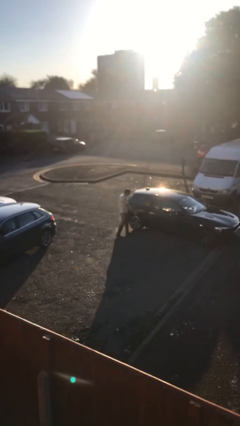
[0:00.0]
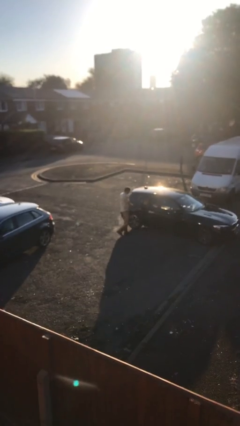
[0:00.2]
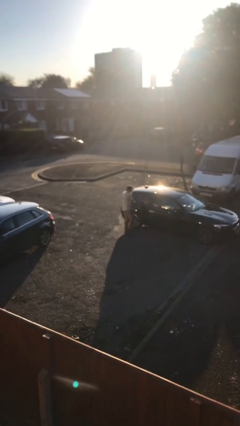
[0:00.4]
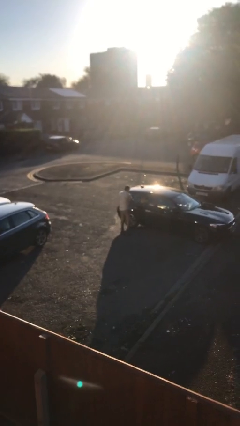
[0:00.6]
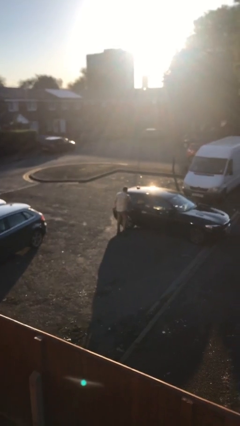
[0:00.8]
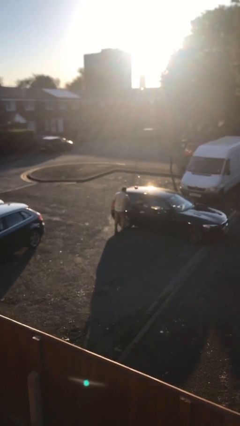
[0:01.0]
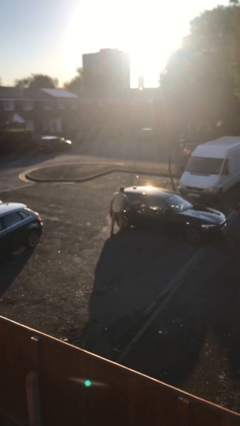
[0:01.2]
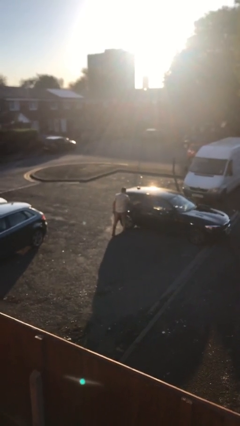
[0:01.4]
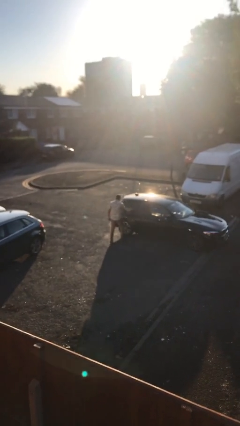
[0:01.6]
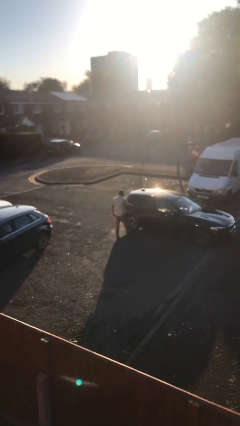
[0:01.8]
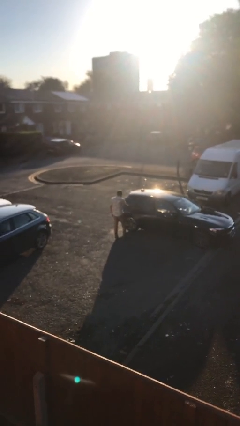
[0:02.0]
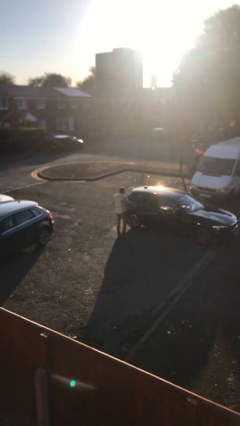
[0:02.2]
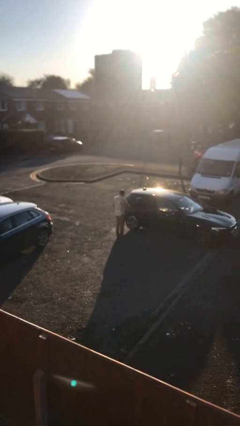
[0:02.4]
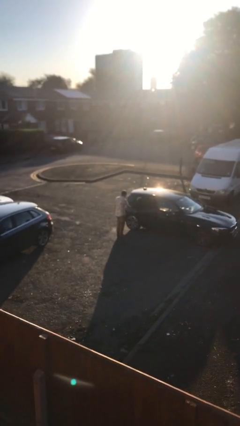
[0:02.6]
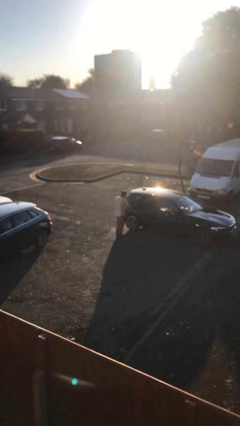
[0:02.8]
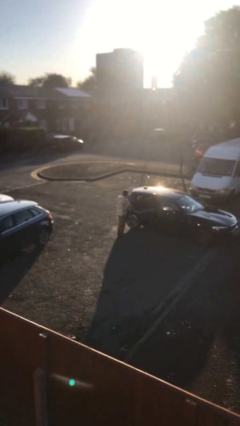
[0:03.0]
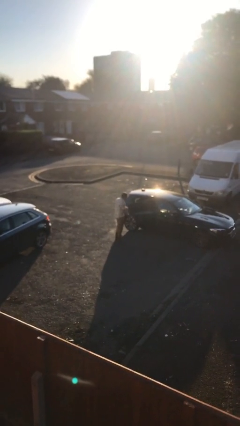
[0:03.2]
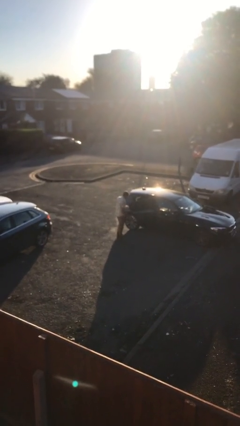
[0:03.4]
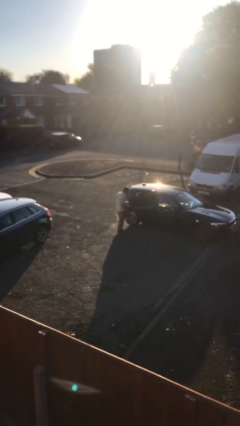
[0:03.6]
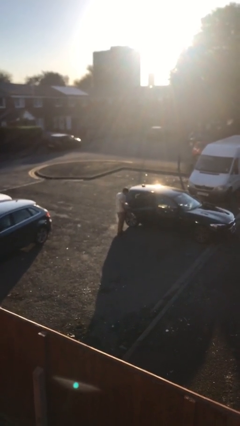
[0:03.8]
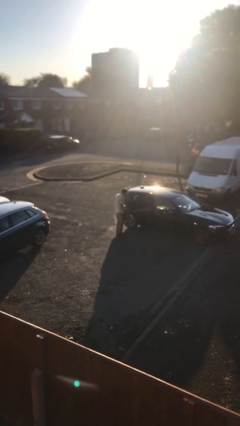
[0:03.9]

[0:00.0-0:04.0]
person opens car door

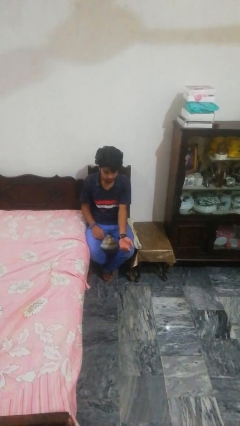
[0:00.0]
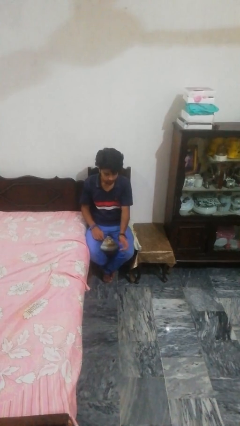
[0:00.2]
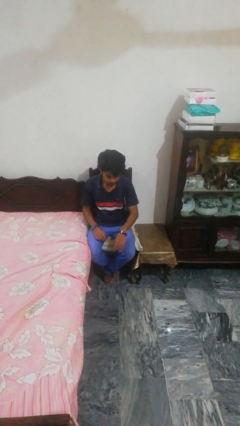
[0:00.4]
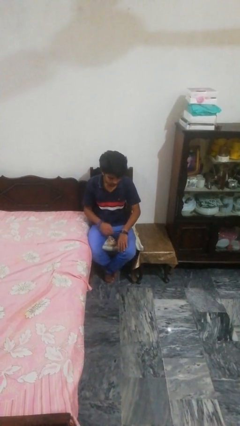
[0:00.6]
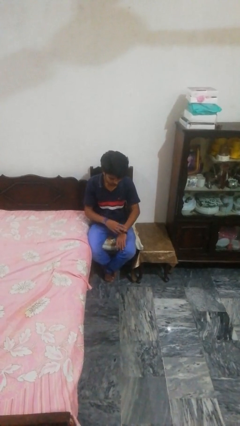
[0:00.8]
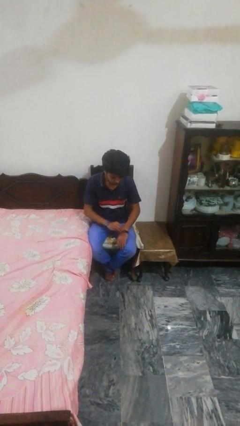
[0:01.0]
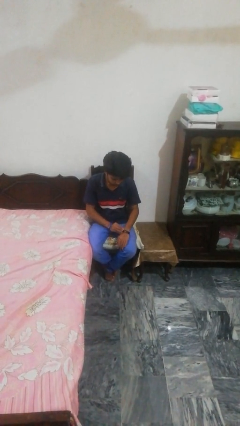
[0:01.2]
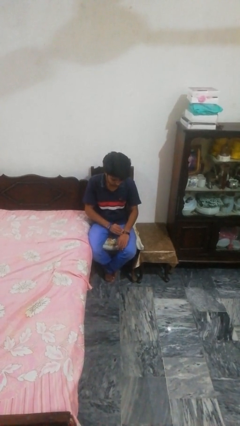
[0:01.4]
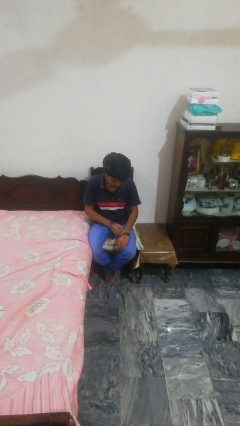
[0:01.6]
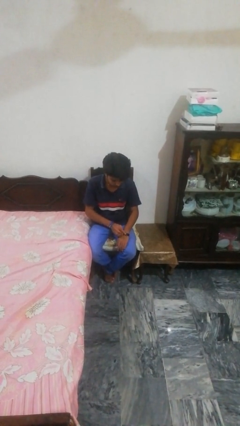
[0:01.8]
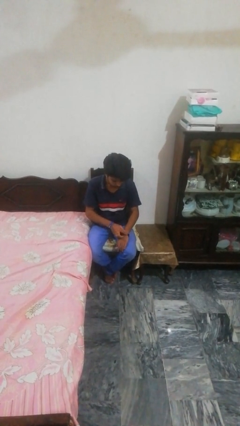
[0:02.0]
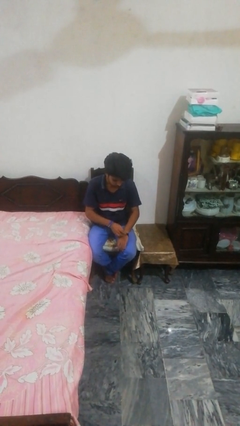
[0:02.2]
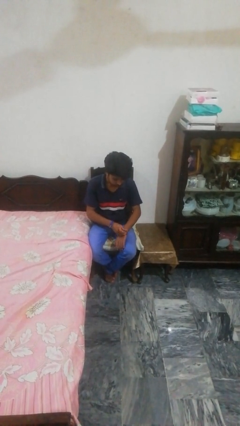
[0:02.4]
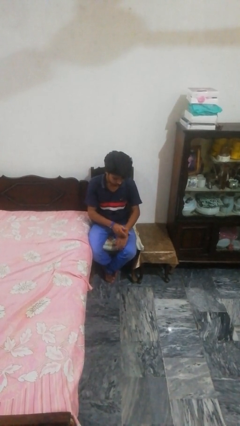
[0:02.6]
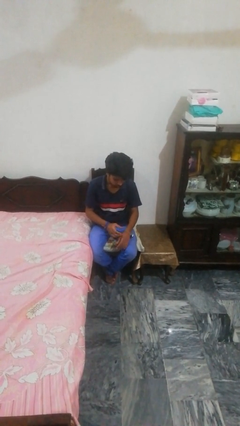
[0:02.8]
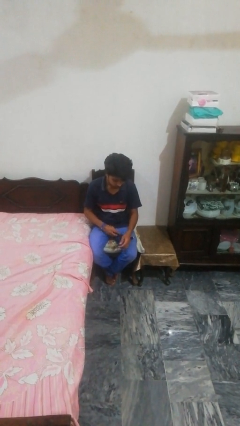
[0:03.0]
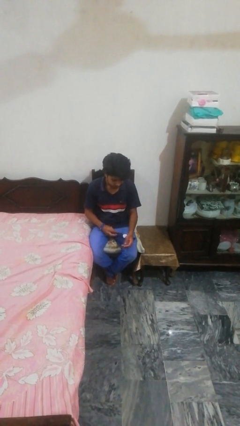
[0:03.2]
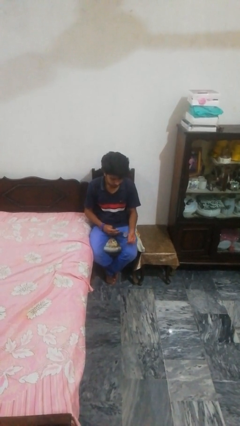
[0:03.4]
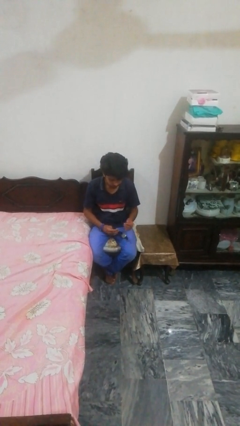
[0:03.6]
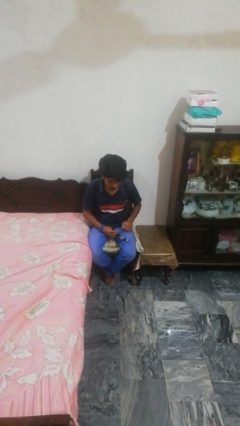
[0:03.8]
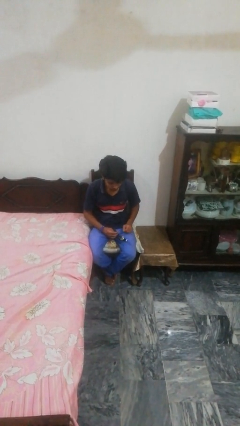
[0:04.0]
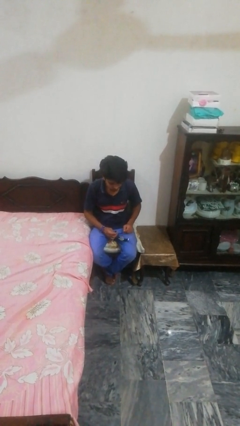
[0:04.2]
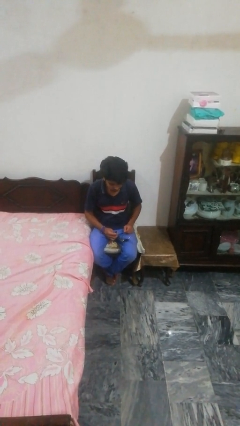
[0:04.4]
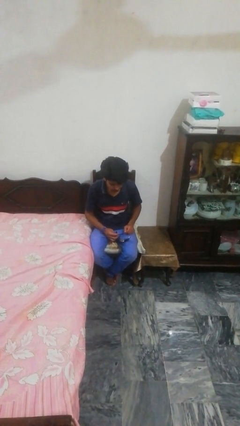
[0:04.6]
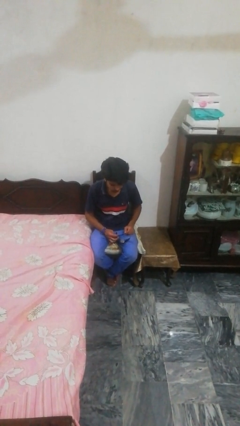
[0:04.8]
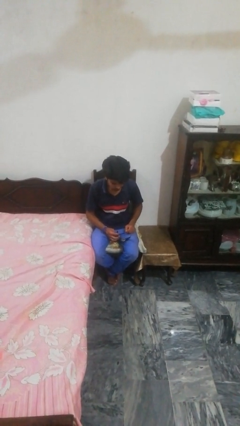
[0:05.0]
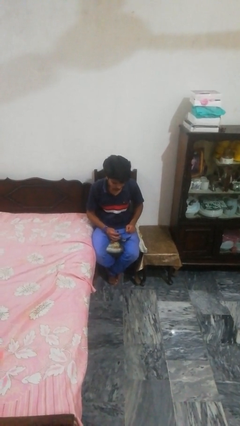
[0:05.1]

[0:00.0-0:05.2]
person takes off wristwatch

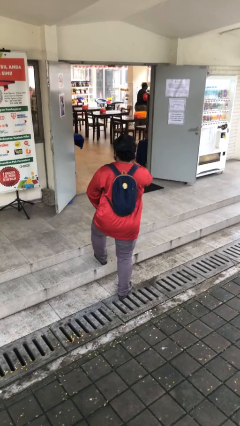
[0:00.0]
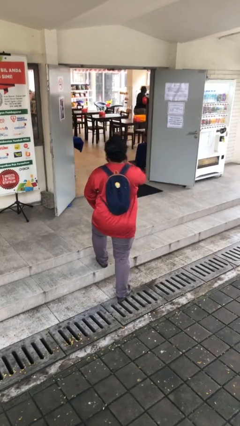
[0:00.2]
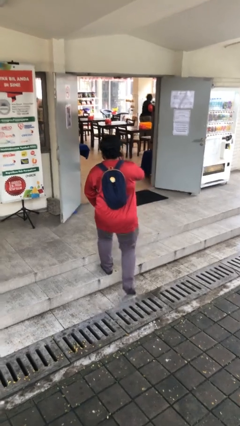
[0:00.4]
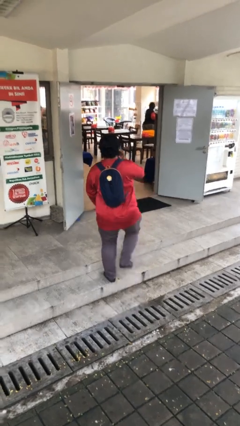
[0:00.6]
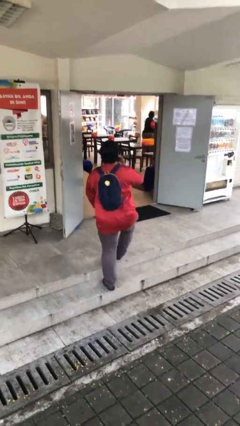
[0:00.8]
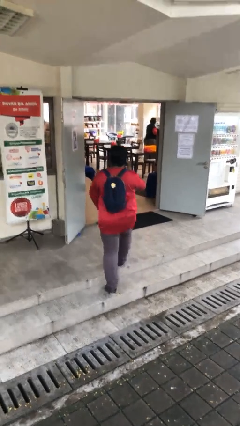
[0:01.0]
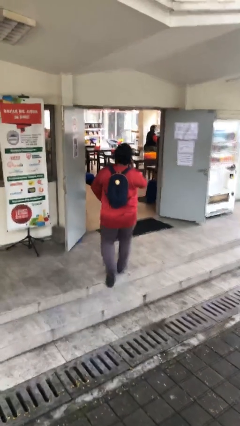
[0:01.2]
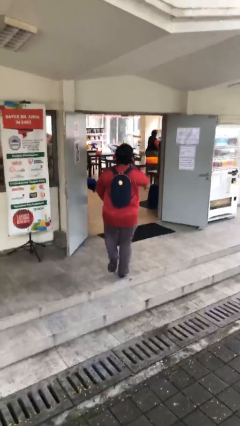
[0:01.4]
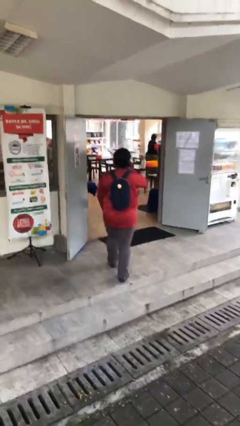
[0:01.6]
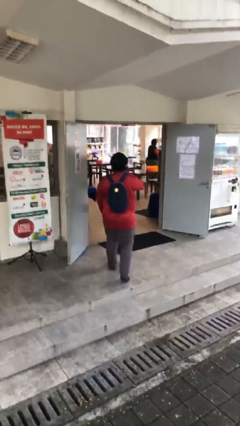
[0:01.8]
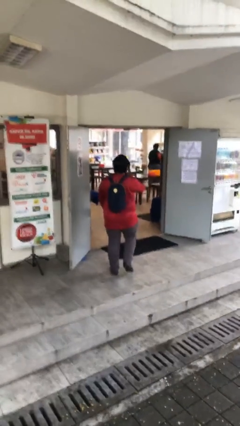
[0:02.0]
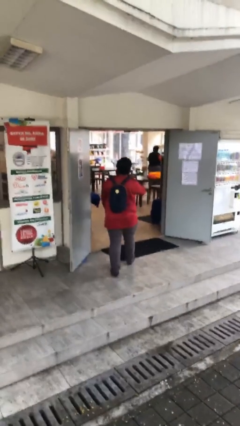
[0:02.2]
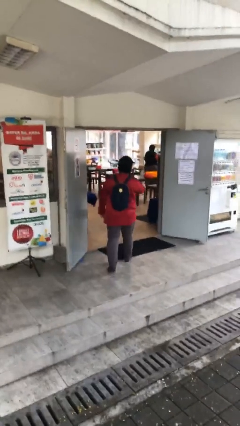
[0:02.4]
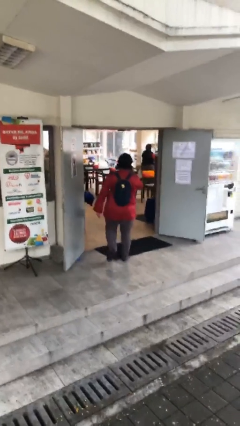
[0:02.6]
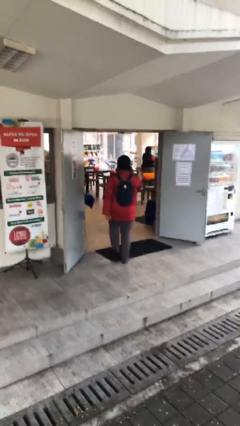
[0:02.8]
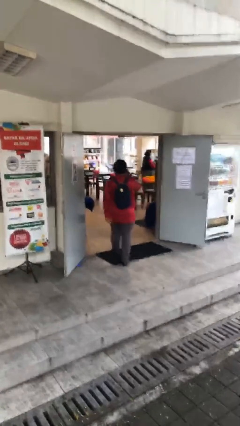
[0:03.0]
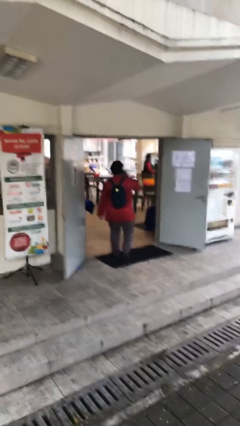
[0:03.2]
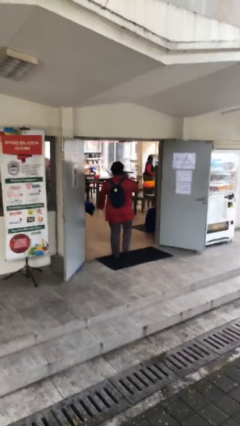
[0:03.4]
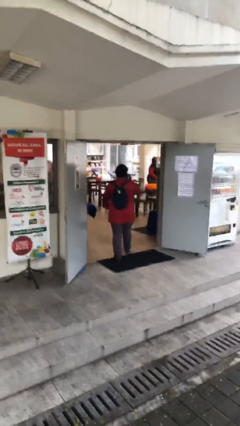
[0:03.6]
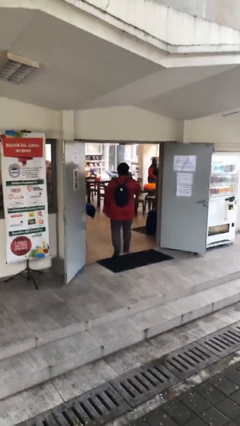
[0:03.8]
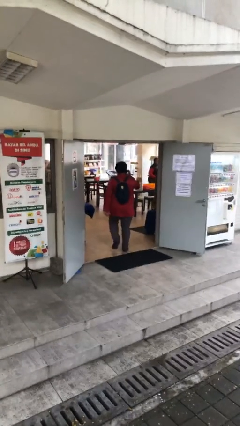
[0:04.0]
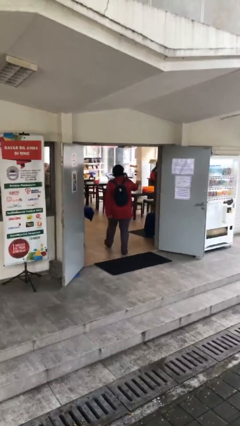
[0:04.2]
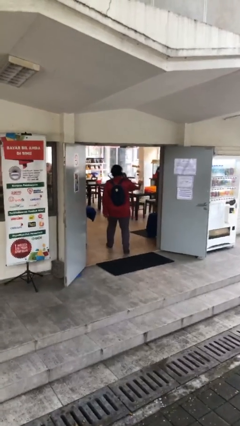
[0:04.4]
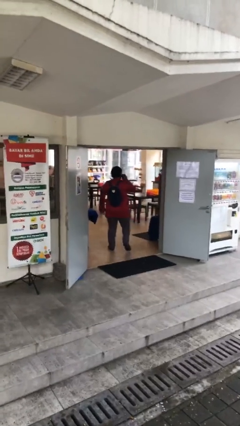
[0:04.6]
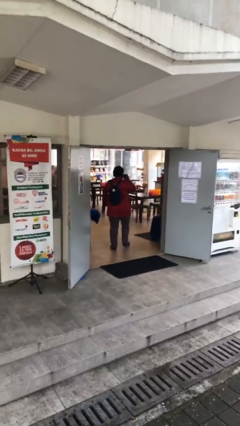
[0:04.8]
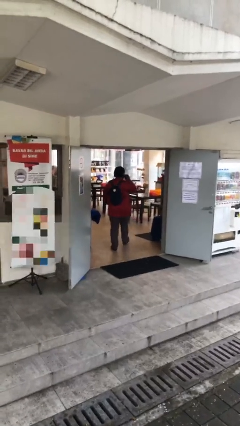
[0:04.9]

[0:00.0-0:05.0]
person exits scene through structure

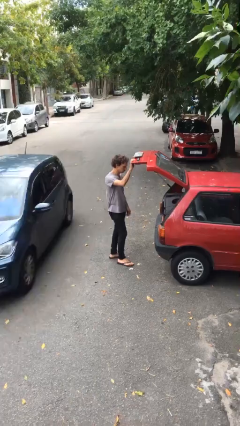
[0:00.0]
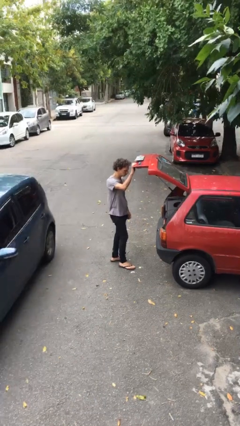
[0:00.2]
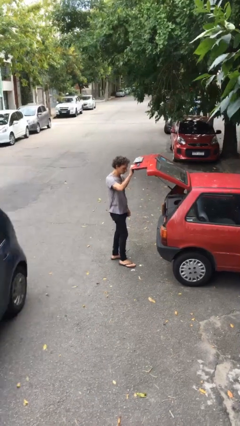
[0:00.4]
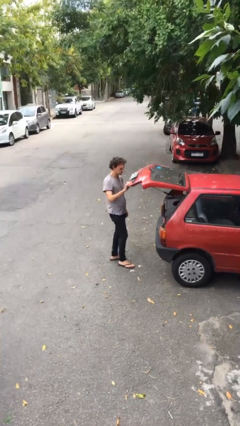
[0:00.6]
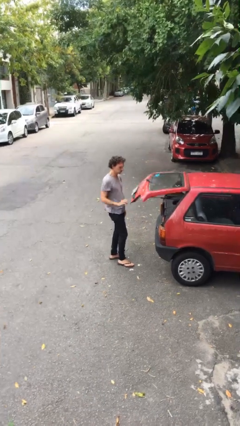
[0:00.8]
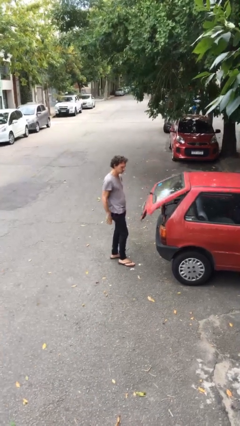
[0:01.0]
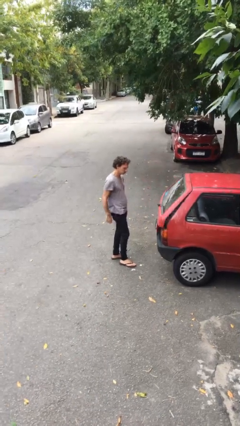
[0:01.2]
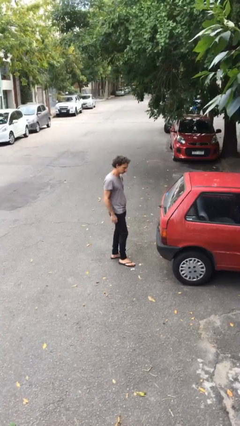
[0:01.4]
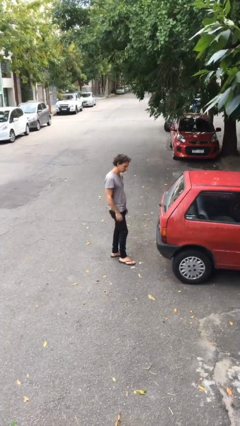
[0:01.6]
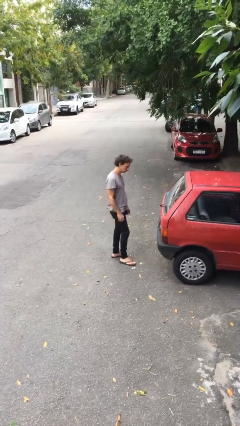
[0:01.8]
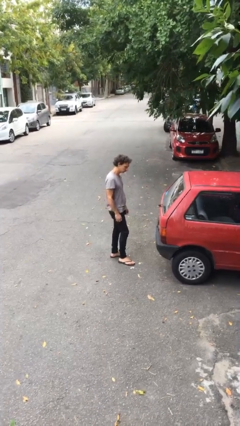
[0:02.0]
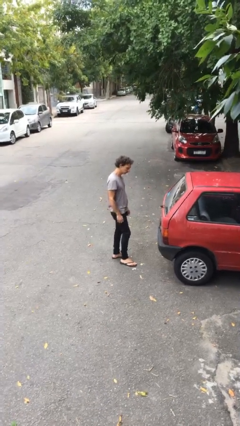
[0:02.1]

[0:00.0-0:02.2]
person closes car trunk

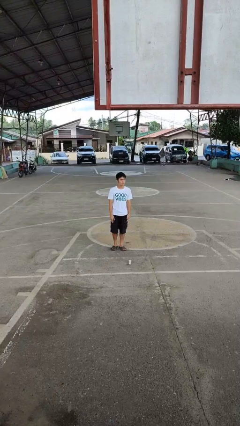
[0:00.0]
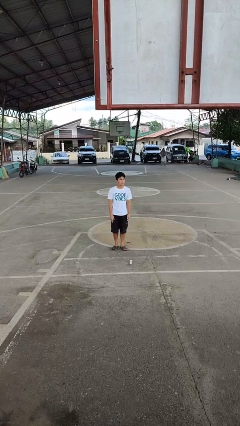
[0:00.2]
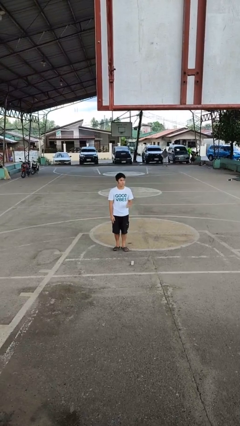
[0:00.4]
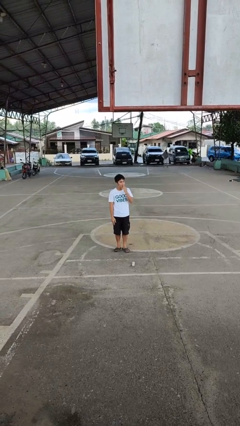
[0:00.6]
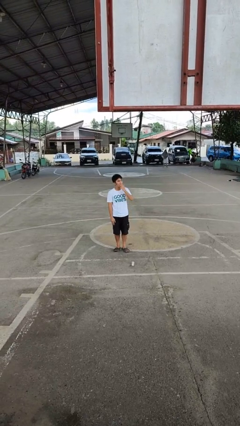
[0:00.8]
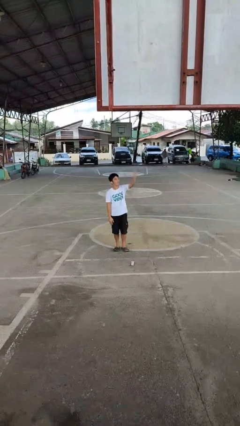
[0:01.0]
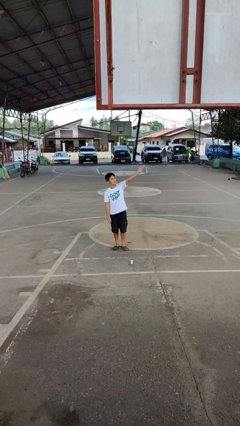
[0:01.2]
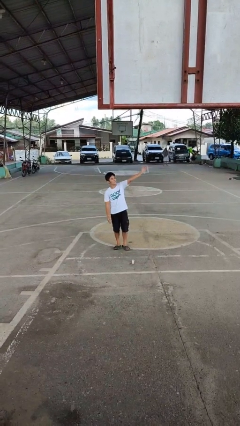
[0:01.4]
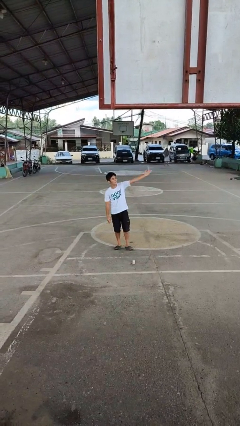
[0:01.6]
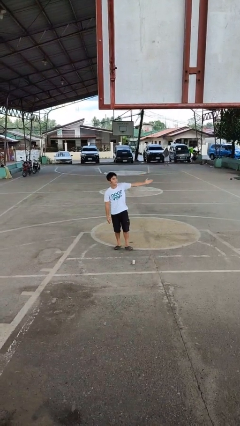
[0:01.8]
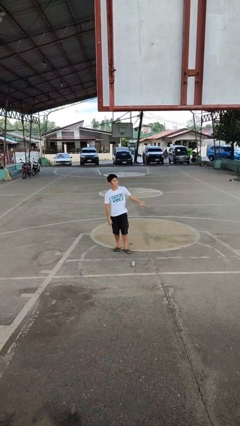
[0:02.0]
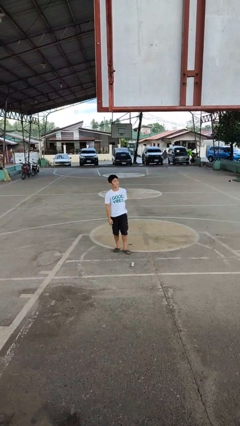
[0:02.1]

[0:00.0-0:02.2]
person gestures blow kiss
